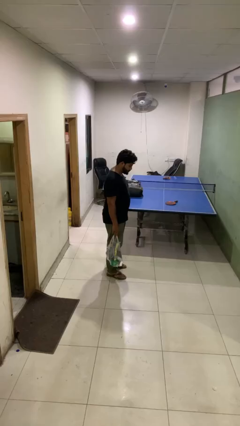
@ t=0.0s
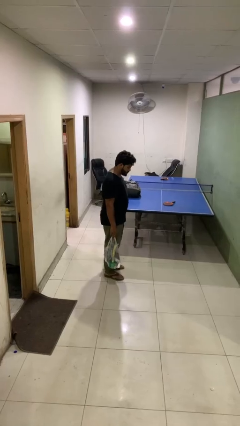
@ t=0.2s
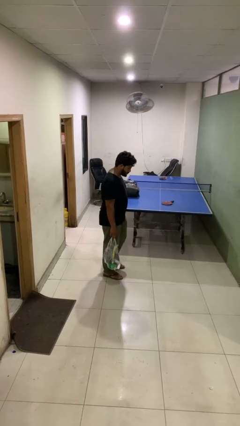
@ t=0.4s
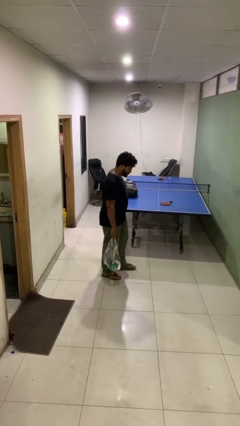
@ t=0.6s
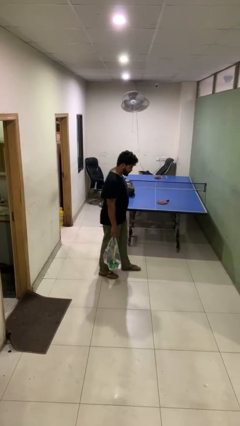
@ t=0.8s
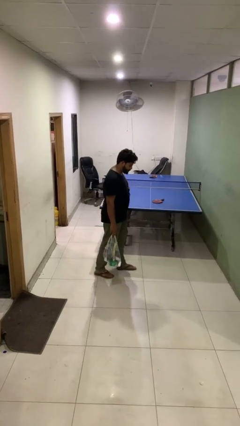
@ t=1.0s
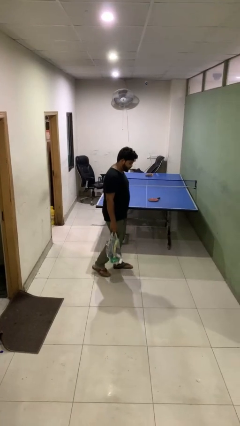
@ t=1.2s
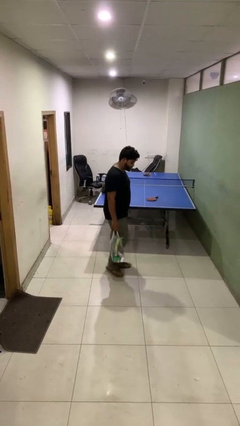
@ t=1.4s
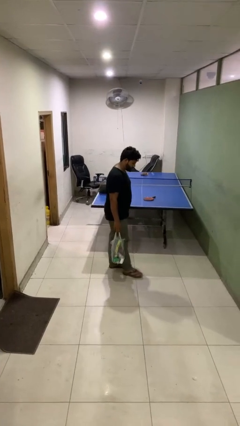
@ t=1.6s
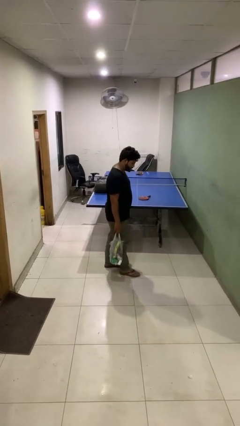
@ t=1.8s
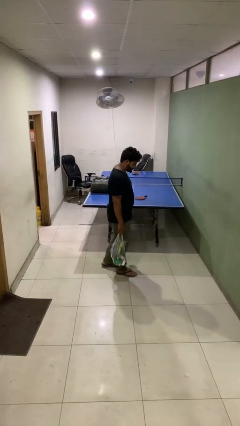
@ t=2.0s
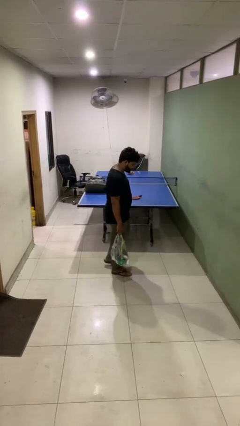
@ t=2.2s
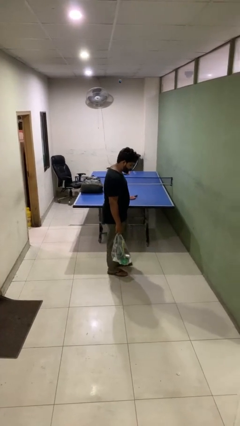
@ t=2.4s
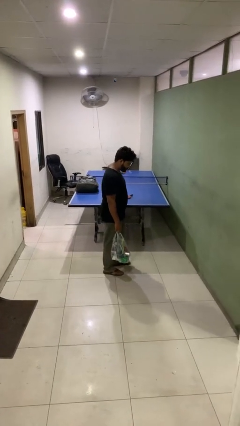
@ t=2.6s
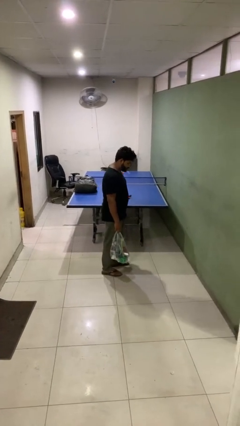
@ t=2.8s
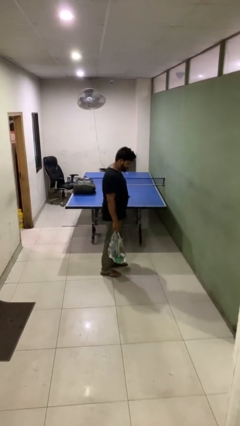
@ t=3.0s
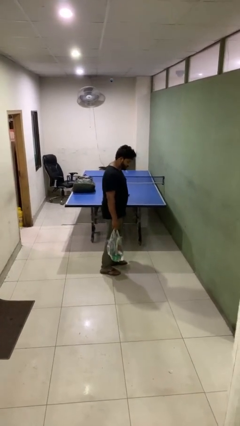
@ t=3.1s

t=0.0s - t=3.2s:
person carries groceries

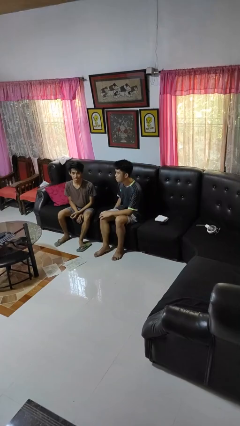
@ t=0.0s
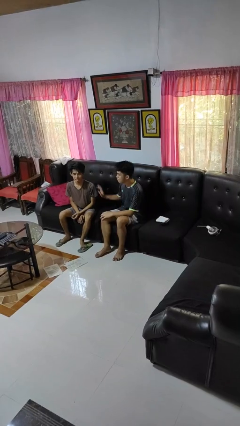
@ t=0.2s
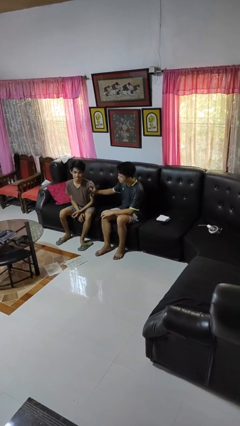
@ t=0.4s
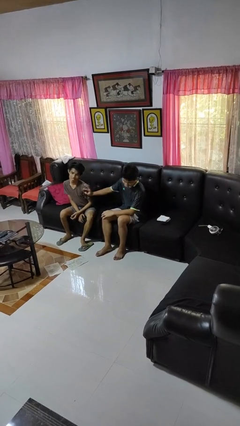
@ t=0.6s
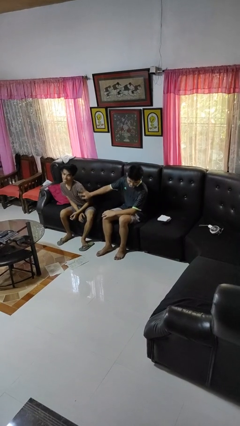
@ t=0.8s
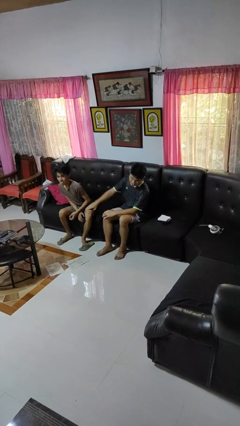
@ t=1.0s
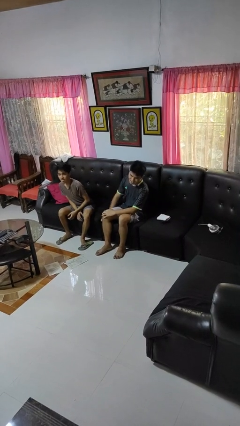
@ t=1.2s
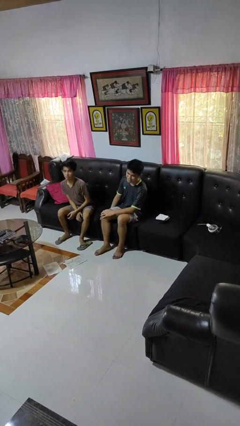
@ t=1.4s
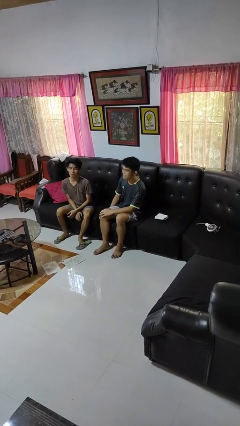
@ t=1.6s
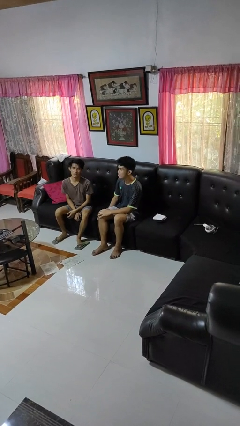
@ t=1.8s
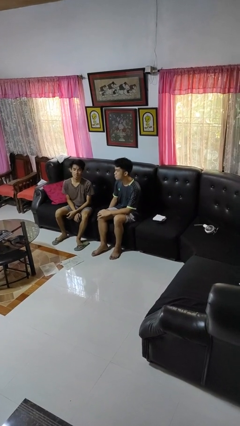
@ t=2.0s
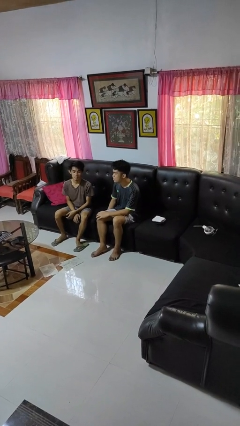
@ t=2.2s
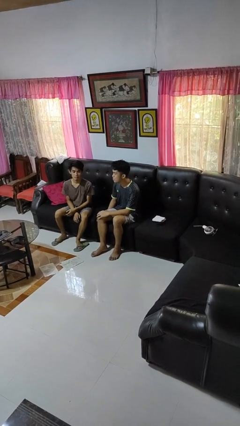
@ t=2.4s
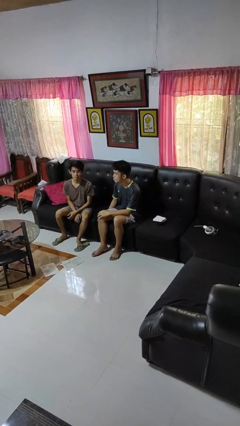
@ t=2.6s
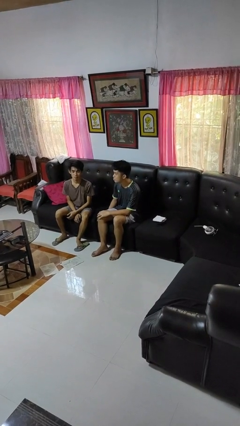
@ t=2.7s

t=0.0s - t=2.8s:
person shoves person

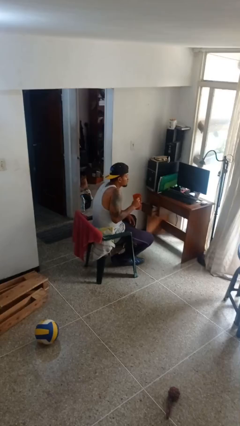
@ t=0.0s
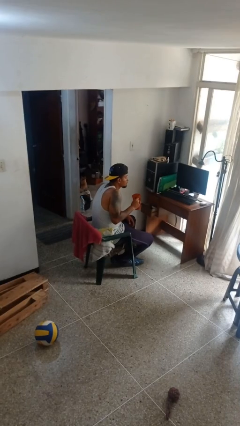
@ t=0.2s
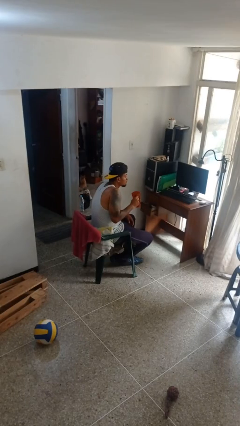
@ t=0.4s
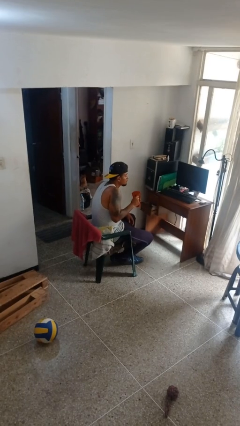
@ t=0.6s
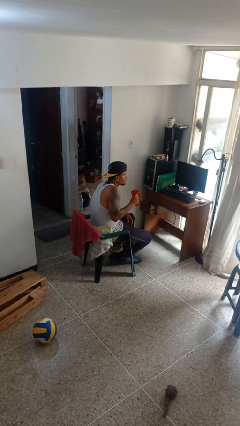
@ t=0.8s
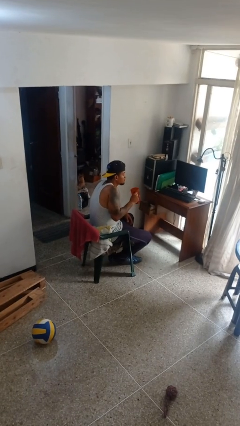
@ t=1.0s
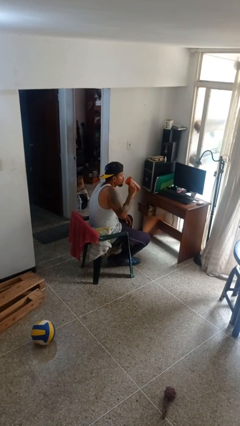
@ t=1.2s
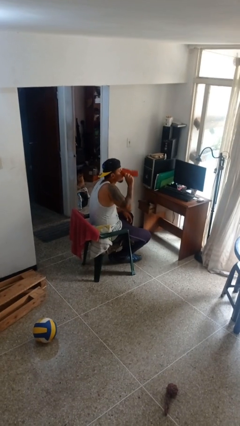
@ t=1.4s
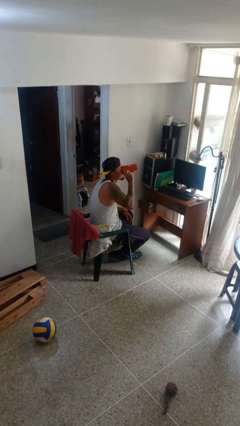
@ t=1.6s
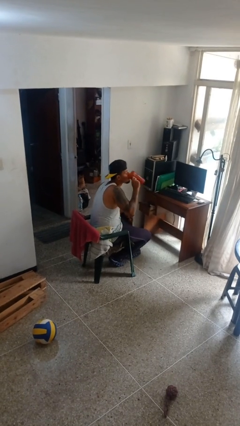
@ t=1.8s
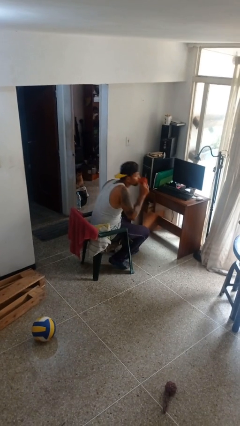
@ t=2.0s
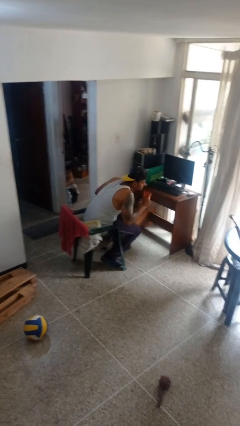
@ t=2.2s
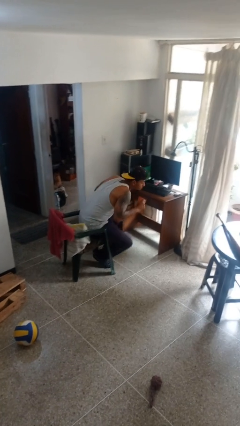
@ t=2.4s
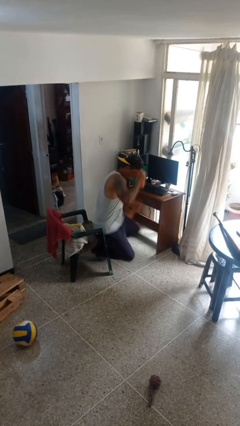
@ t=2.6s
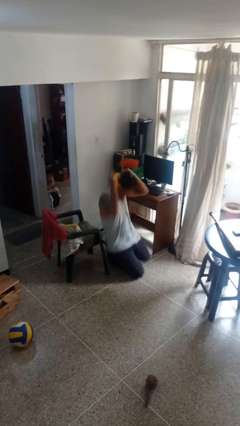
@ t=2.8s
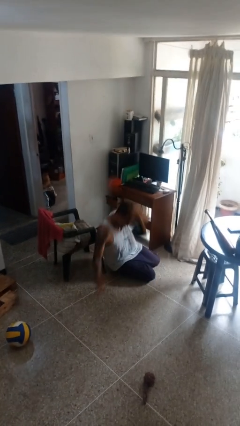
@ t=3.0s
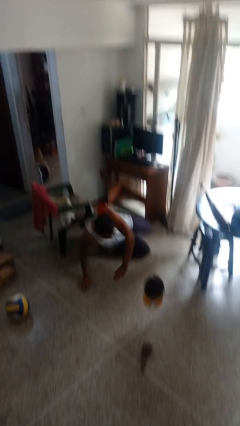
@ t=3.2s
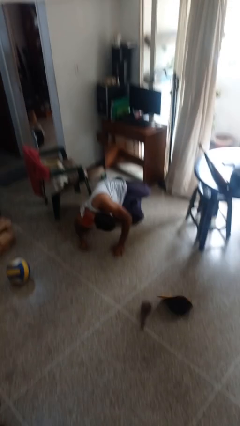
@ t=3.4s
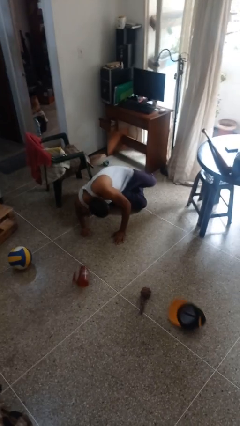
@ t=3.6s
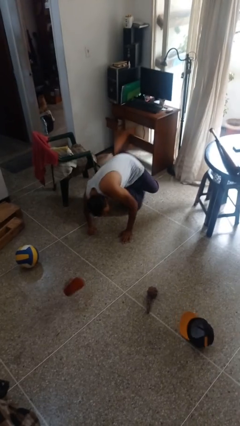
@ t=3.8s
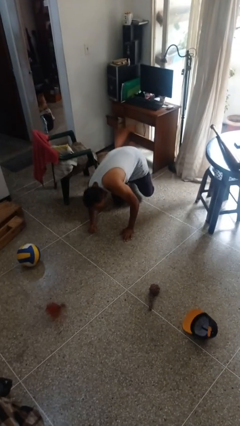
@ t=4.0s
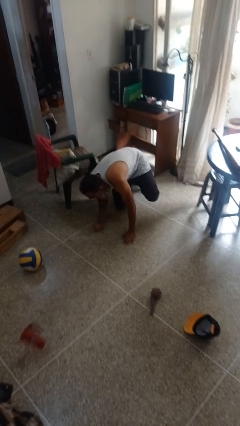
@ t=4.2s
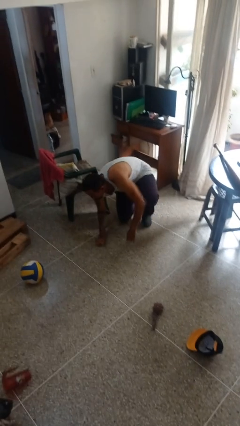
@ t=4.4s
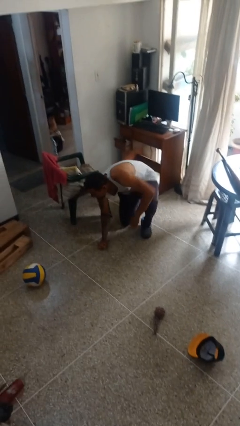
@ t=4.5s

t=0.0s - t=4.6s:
person falls from chair

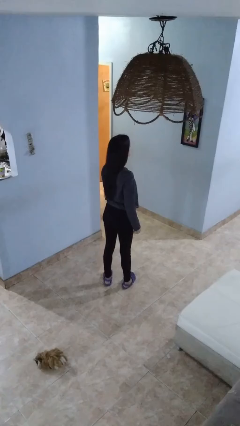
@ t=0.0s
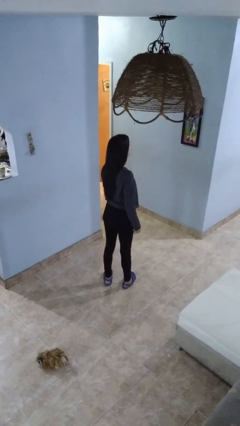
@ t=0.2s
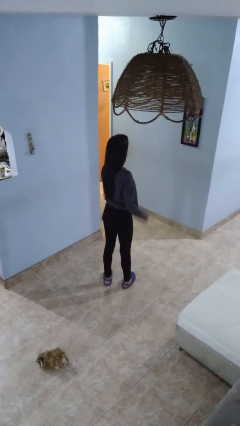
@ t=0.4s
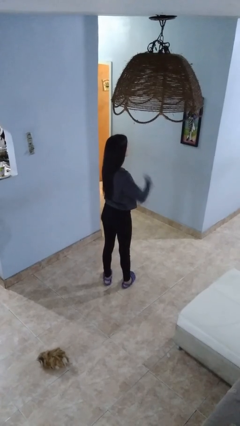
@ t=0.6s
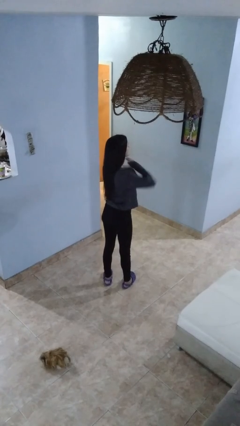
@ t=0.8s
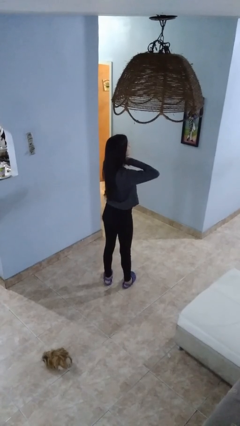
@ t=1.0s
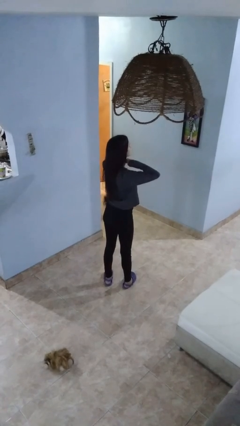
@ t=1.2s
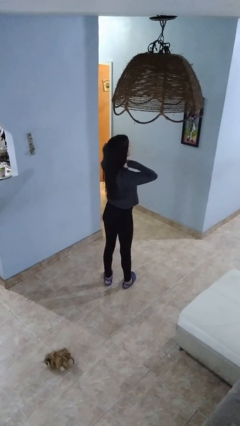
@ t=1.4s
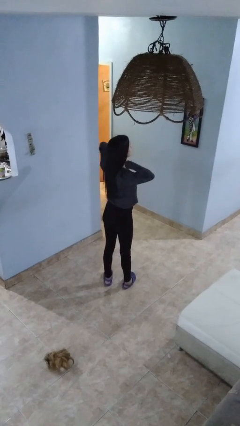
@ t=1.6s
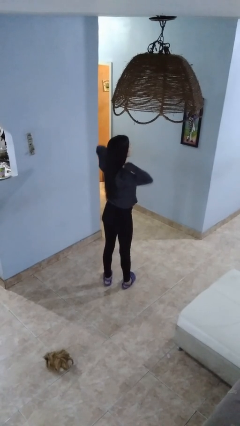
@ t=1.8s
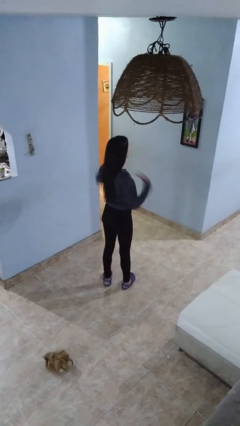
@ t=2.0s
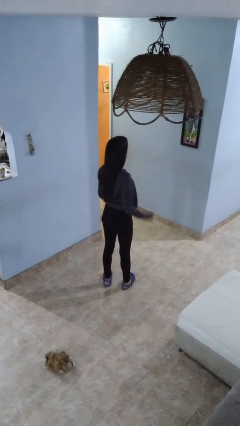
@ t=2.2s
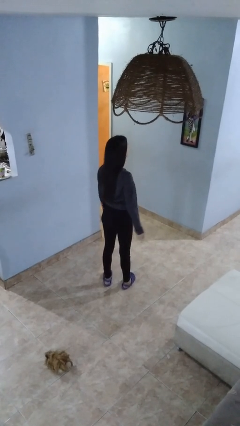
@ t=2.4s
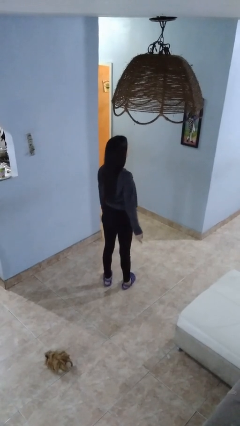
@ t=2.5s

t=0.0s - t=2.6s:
person gestures cut

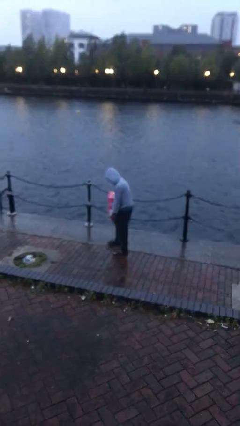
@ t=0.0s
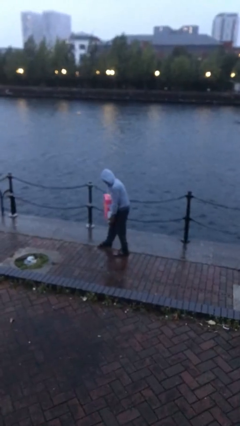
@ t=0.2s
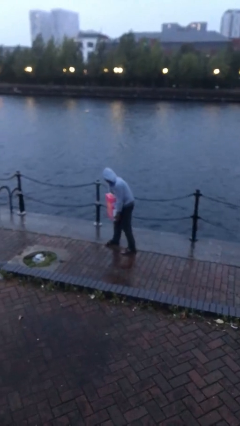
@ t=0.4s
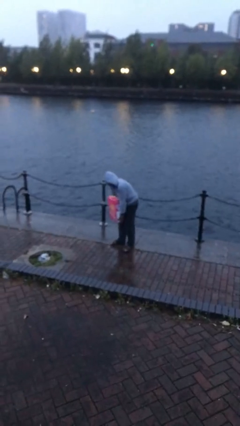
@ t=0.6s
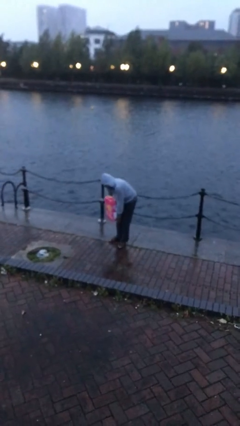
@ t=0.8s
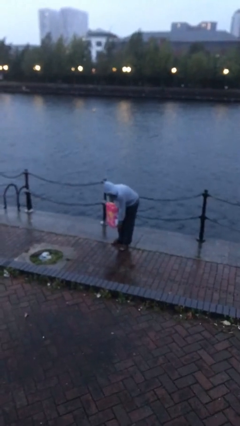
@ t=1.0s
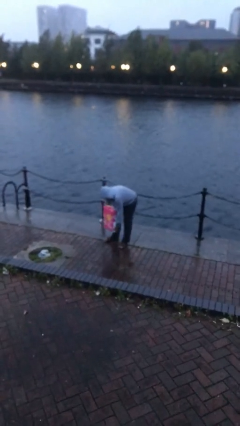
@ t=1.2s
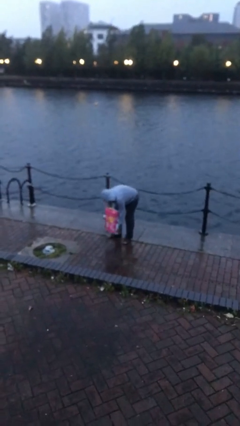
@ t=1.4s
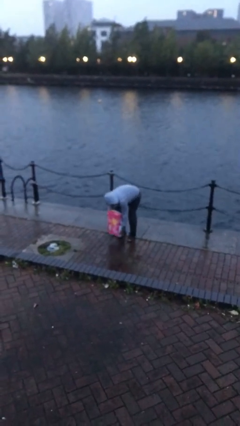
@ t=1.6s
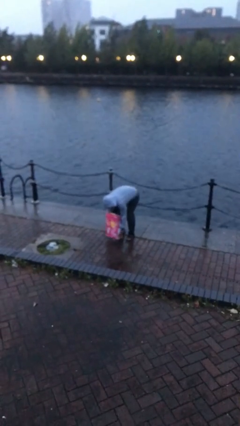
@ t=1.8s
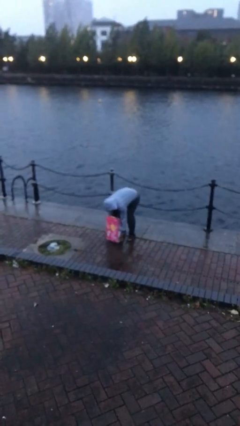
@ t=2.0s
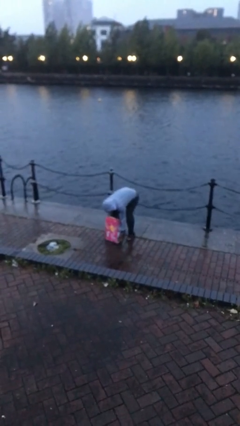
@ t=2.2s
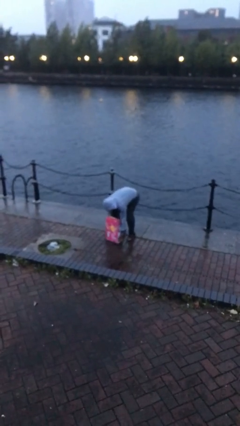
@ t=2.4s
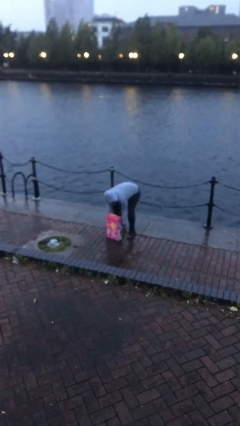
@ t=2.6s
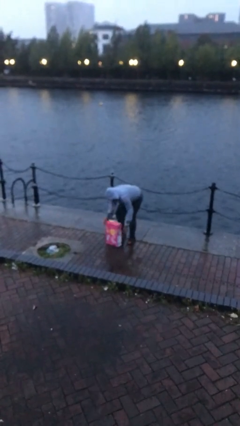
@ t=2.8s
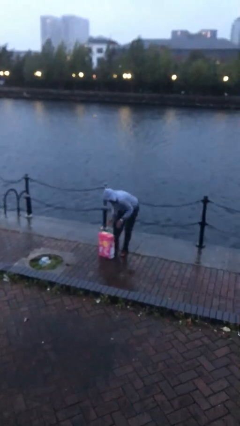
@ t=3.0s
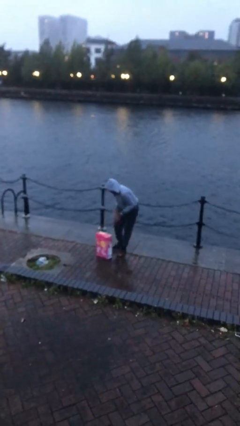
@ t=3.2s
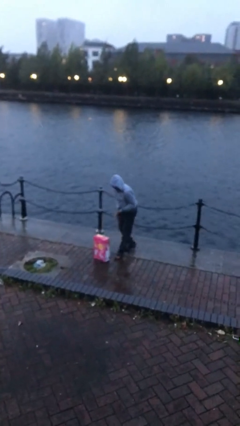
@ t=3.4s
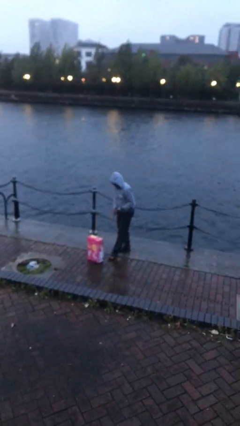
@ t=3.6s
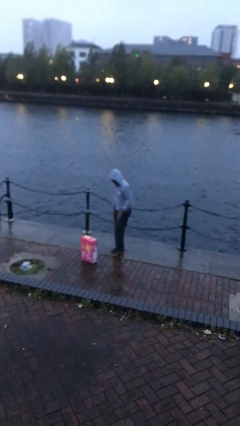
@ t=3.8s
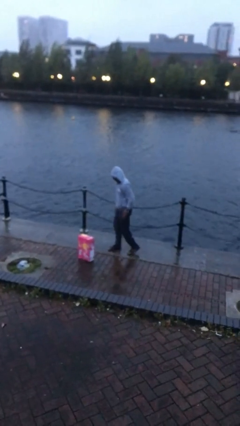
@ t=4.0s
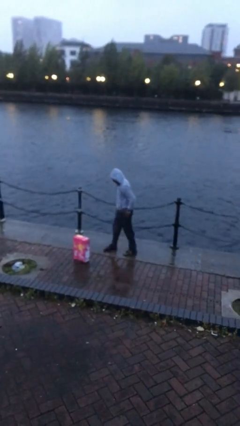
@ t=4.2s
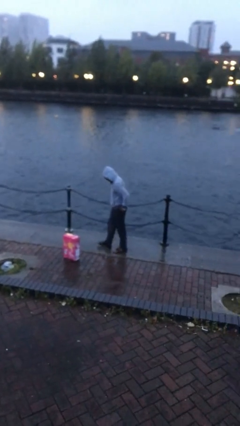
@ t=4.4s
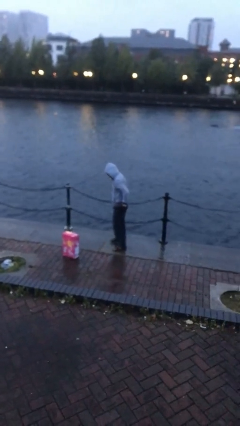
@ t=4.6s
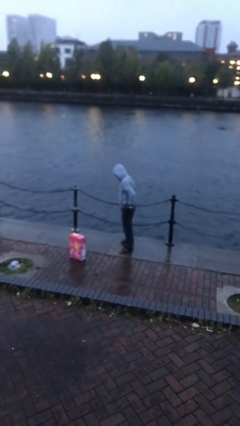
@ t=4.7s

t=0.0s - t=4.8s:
person puts down object on floor
